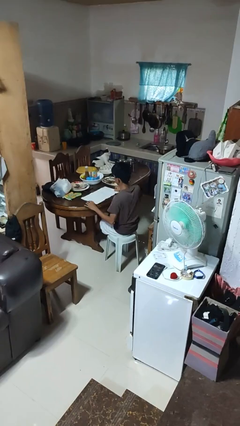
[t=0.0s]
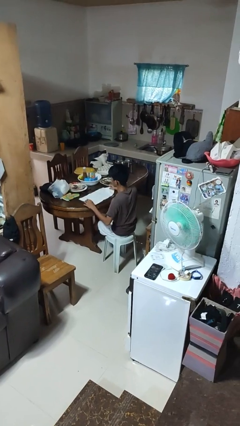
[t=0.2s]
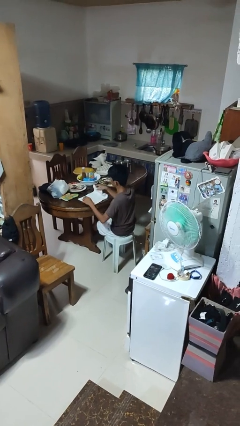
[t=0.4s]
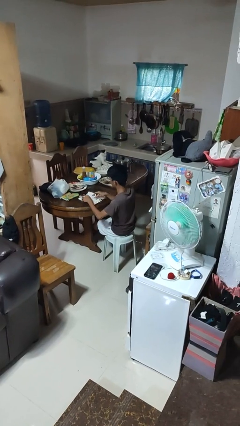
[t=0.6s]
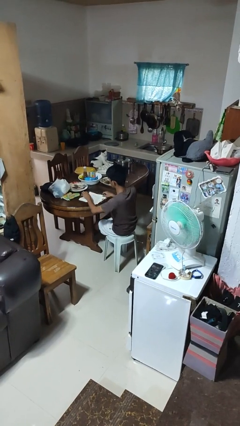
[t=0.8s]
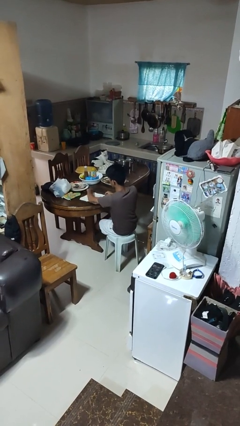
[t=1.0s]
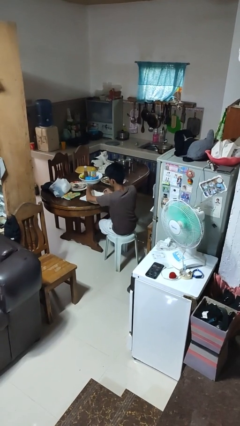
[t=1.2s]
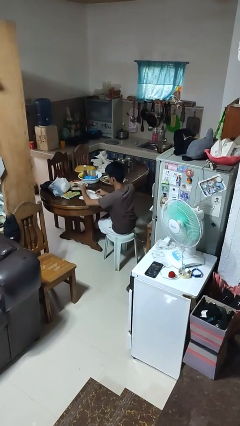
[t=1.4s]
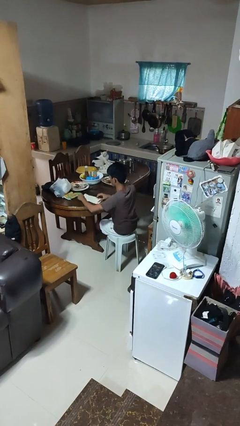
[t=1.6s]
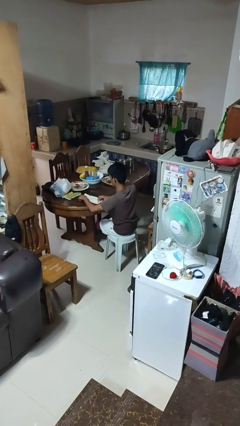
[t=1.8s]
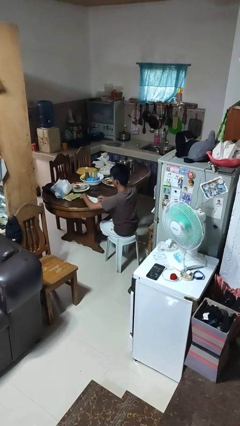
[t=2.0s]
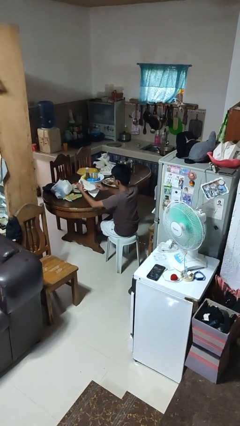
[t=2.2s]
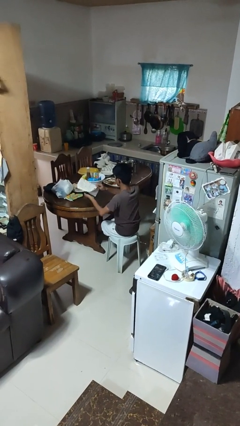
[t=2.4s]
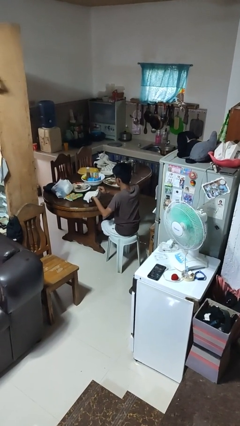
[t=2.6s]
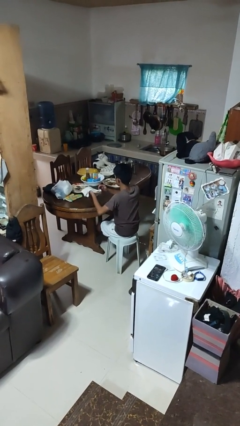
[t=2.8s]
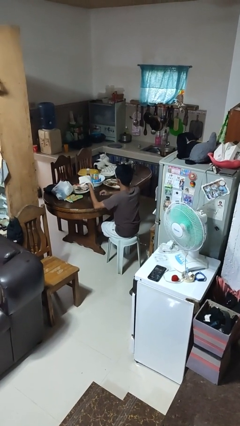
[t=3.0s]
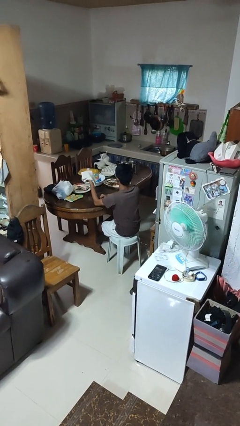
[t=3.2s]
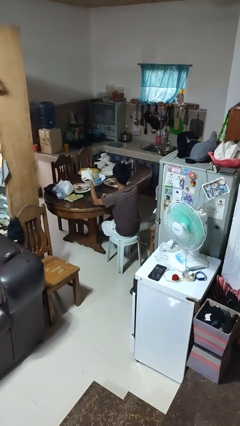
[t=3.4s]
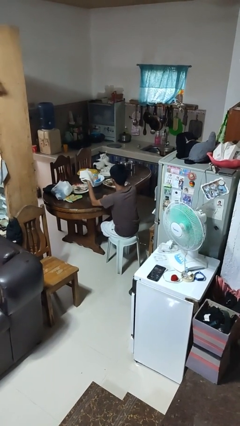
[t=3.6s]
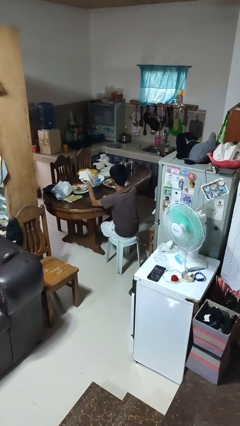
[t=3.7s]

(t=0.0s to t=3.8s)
person folds tablecloth

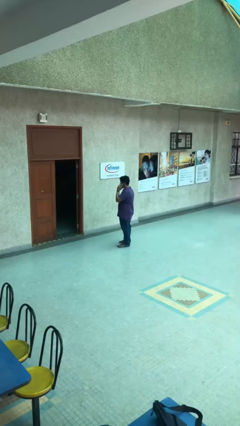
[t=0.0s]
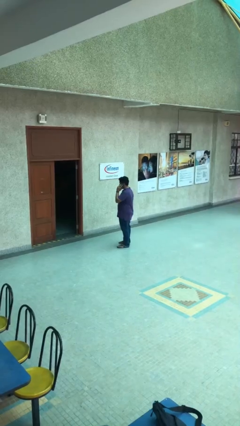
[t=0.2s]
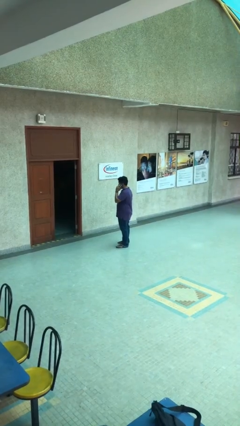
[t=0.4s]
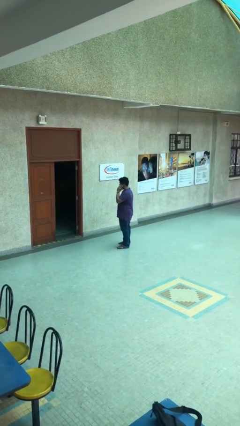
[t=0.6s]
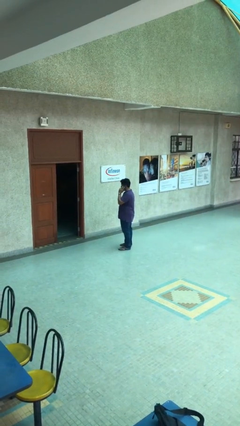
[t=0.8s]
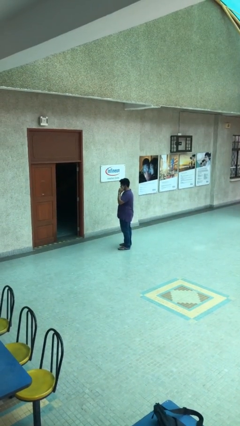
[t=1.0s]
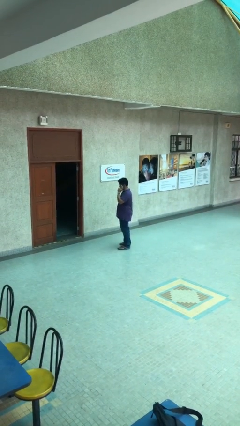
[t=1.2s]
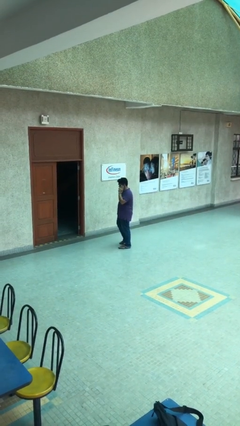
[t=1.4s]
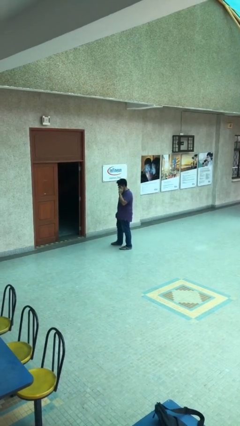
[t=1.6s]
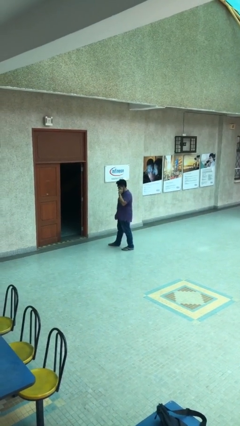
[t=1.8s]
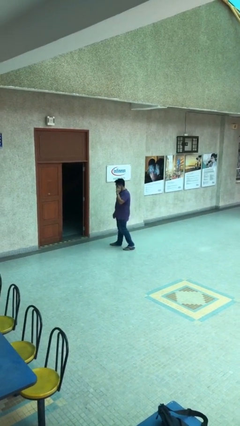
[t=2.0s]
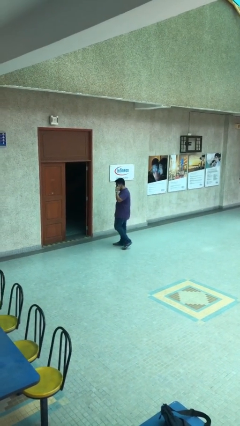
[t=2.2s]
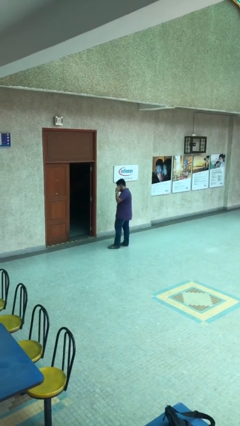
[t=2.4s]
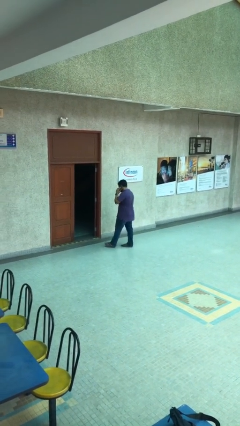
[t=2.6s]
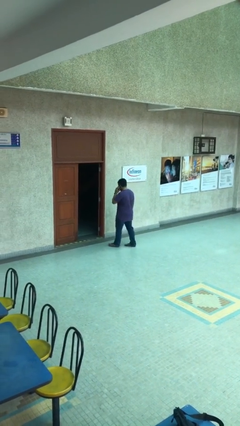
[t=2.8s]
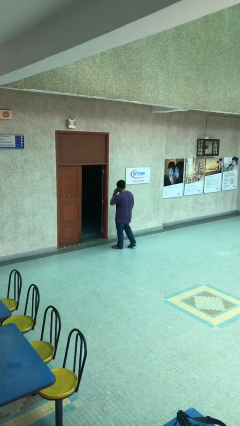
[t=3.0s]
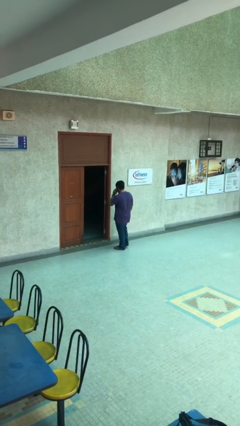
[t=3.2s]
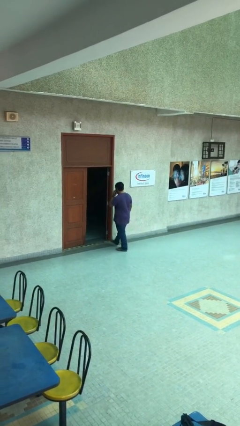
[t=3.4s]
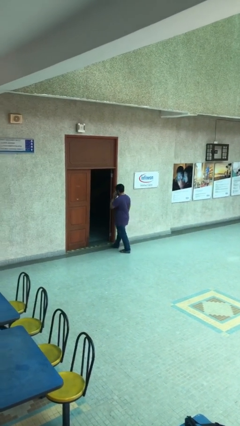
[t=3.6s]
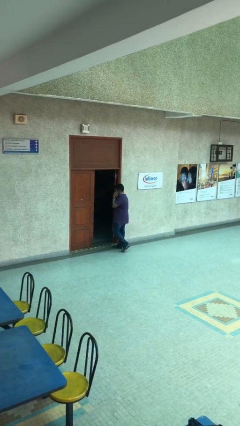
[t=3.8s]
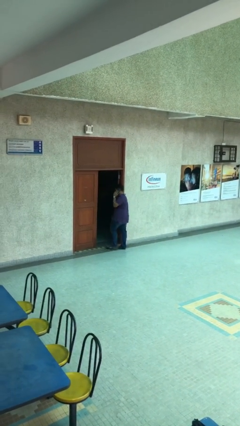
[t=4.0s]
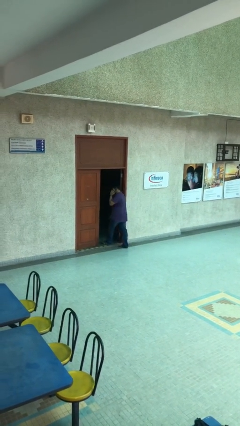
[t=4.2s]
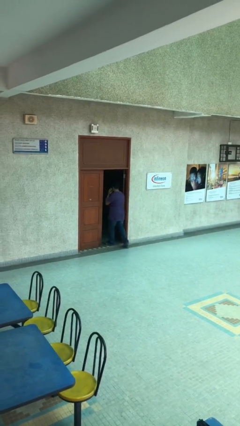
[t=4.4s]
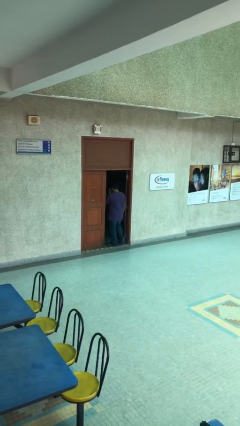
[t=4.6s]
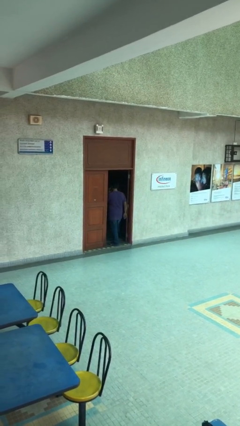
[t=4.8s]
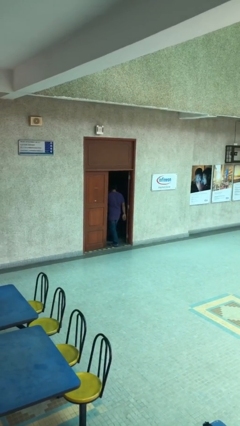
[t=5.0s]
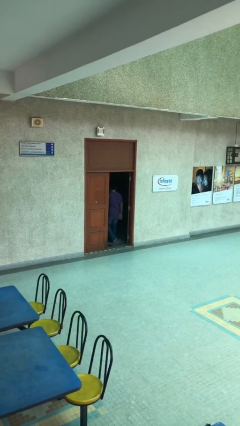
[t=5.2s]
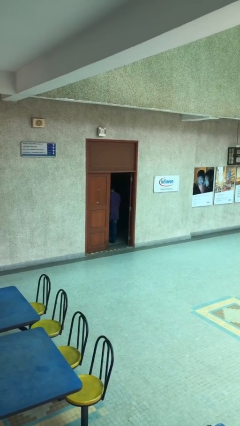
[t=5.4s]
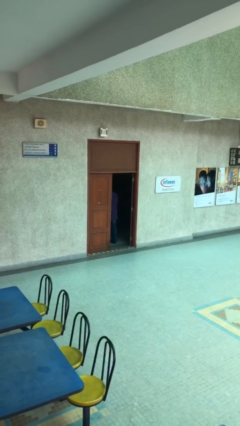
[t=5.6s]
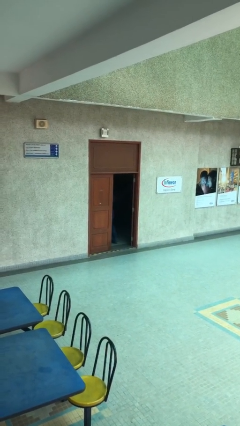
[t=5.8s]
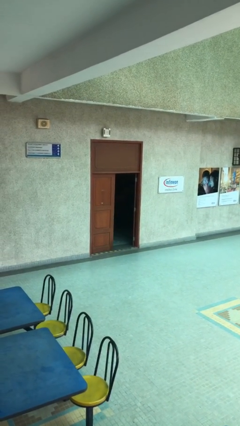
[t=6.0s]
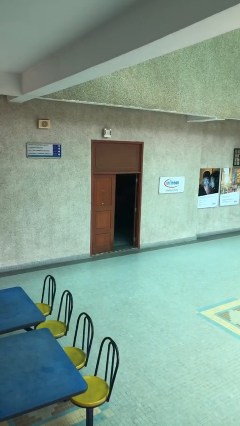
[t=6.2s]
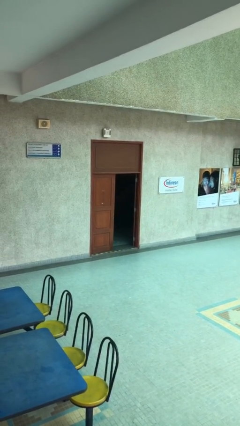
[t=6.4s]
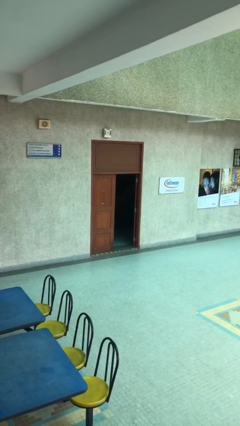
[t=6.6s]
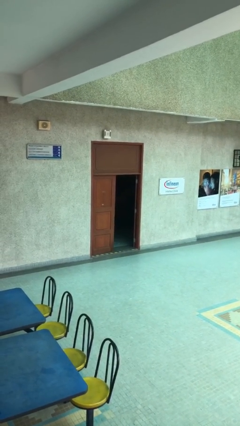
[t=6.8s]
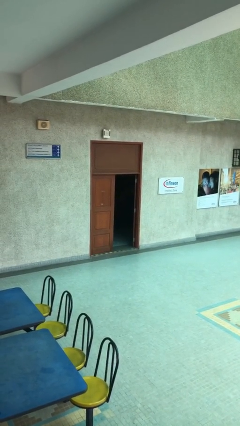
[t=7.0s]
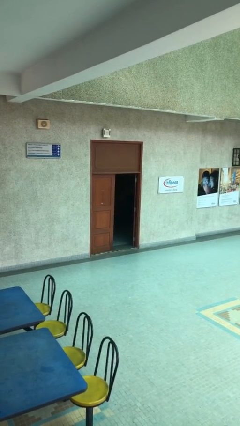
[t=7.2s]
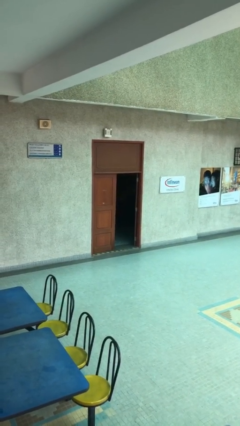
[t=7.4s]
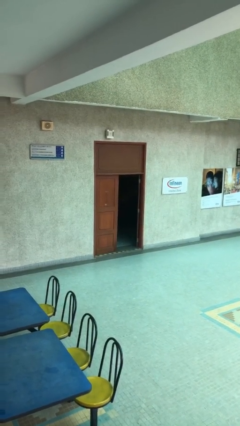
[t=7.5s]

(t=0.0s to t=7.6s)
person exits scene through structure

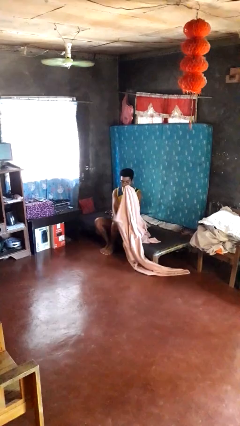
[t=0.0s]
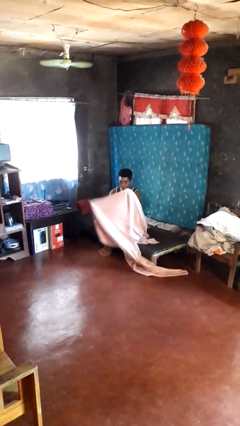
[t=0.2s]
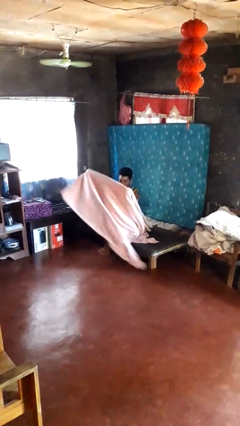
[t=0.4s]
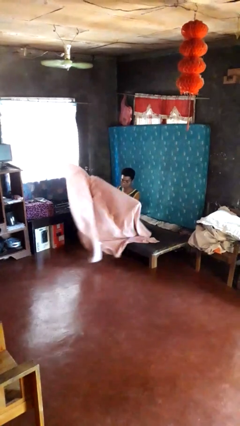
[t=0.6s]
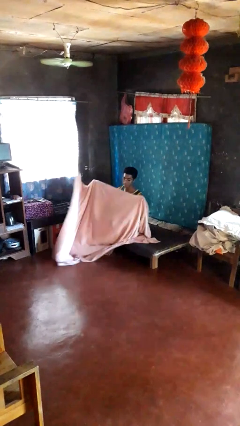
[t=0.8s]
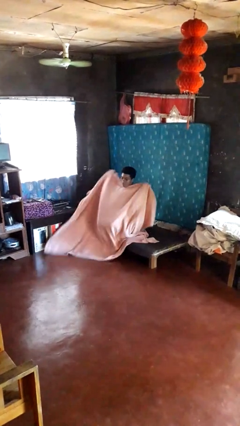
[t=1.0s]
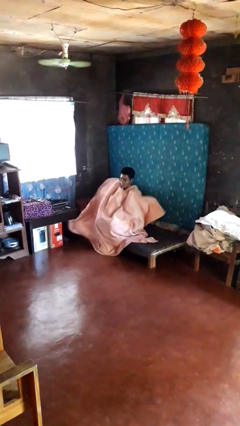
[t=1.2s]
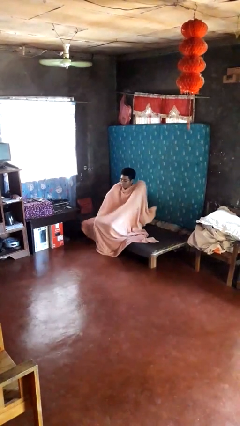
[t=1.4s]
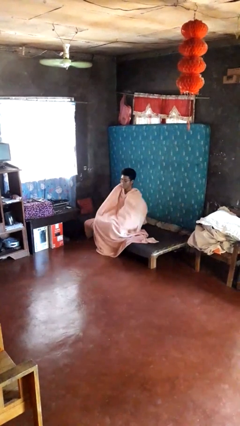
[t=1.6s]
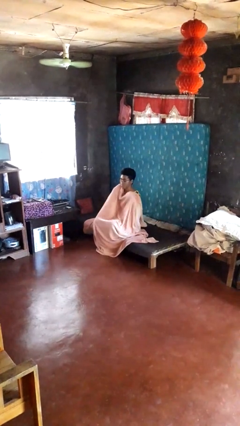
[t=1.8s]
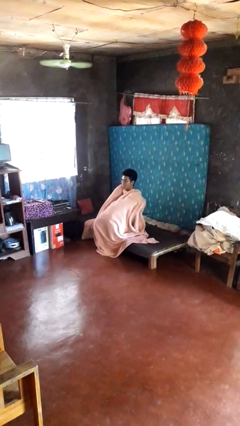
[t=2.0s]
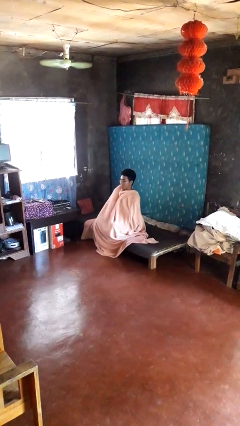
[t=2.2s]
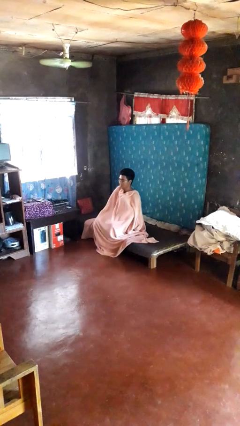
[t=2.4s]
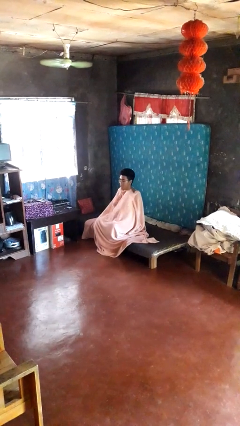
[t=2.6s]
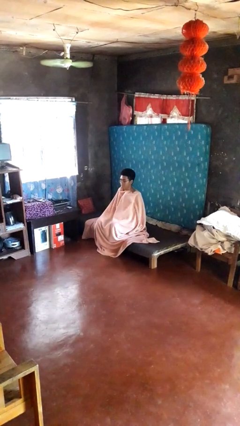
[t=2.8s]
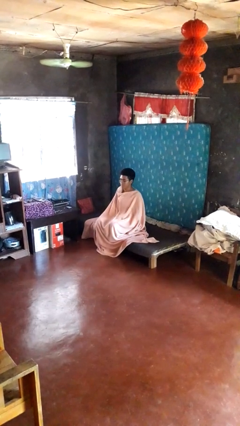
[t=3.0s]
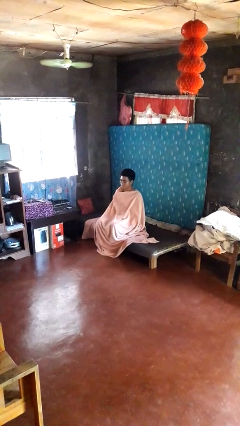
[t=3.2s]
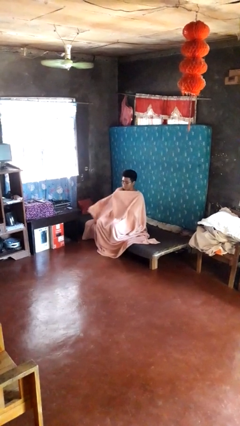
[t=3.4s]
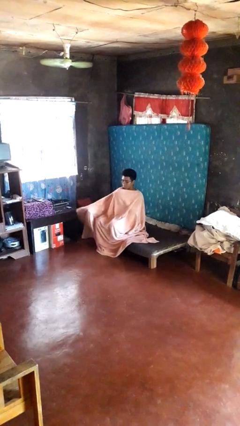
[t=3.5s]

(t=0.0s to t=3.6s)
person covers with blanket

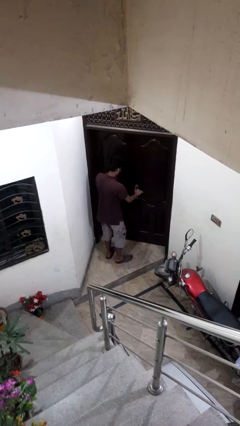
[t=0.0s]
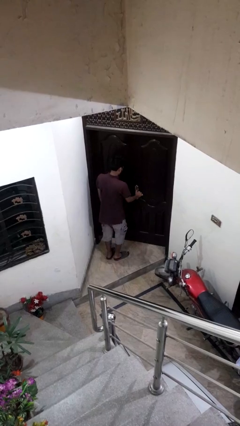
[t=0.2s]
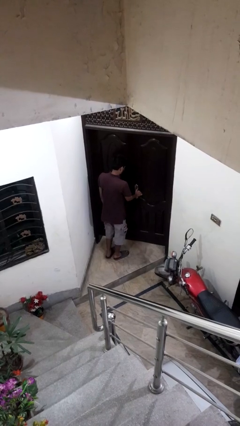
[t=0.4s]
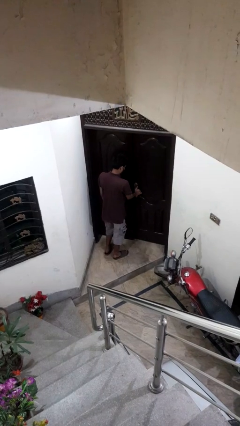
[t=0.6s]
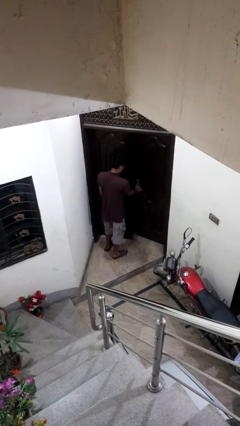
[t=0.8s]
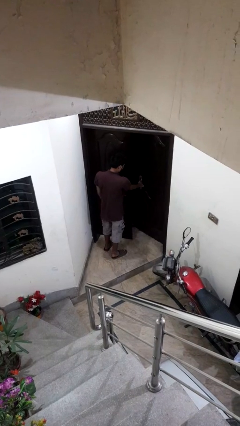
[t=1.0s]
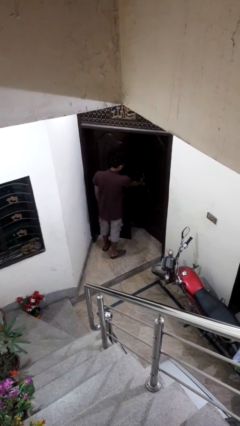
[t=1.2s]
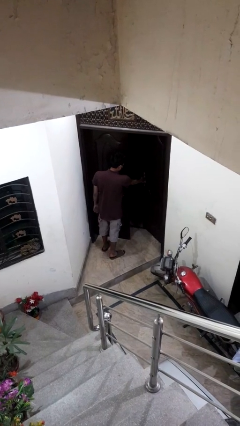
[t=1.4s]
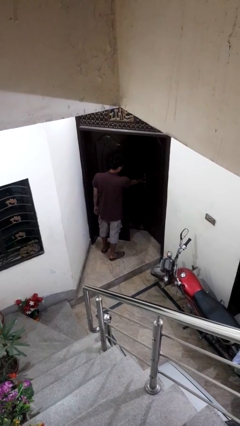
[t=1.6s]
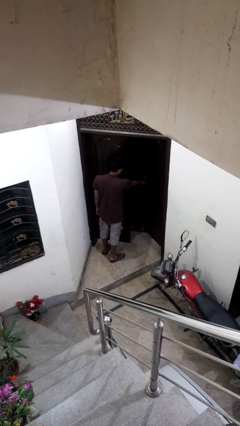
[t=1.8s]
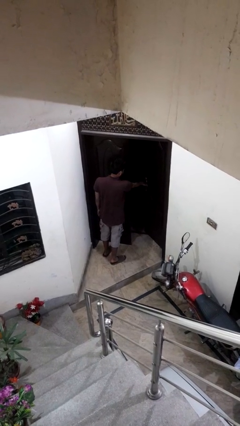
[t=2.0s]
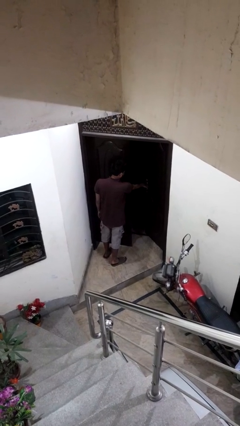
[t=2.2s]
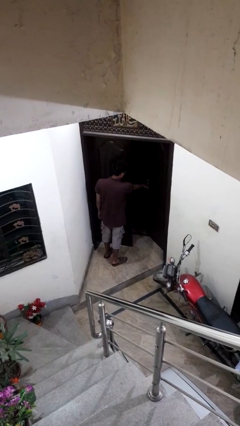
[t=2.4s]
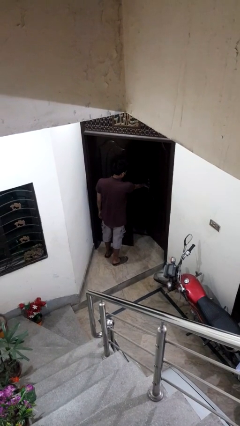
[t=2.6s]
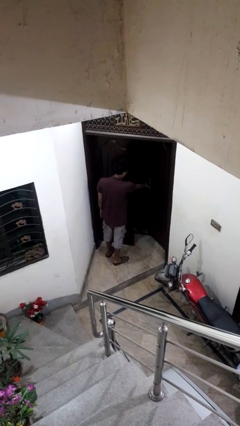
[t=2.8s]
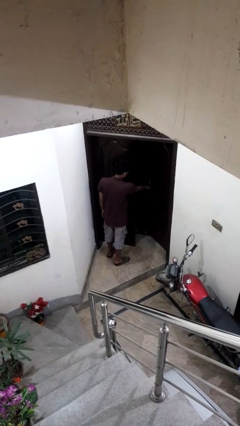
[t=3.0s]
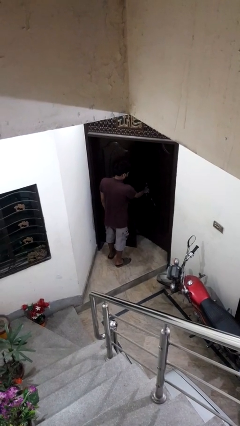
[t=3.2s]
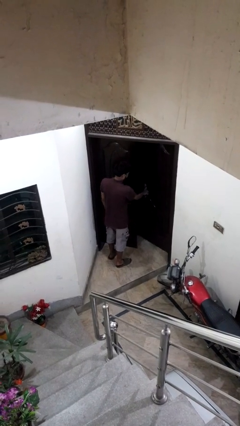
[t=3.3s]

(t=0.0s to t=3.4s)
person opens facility door
